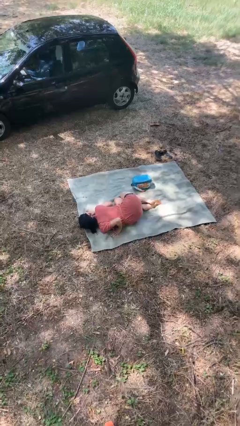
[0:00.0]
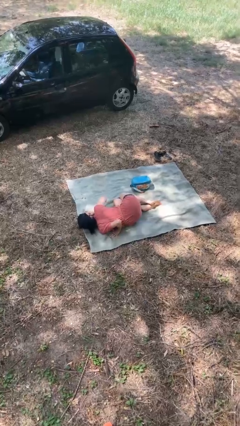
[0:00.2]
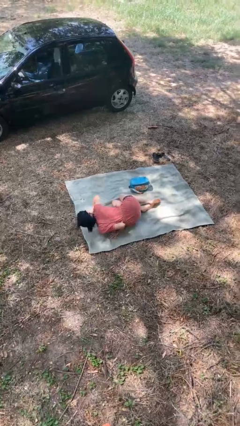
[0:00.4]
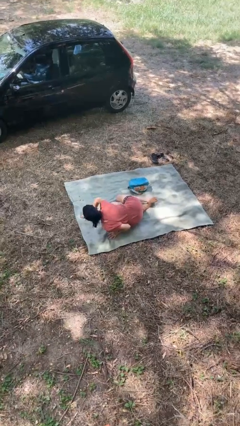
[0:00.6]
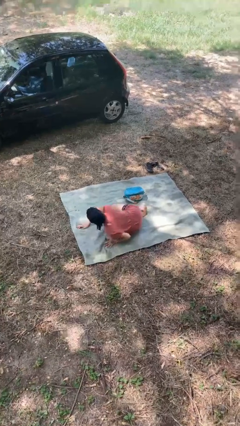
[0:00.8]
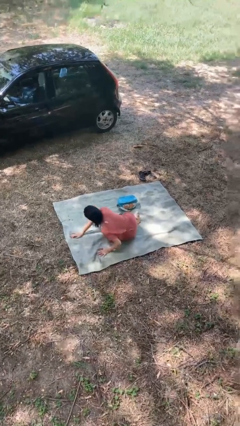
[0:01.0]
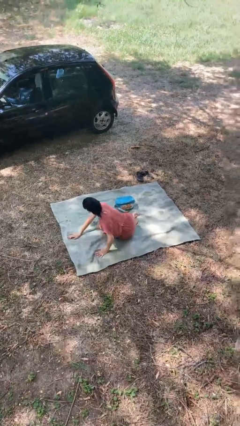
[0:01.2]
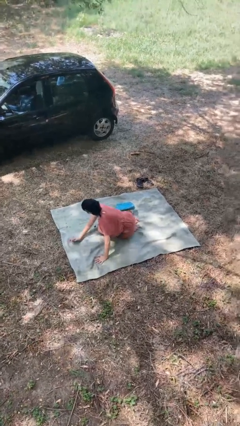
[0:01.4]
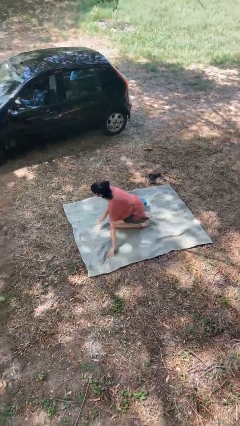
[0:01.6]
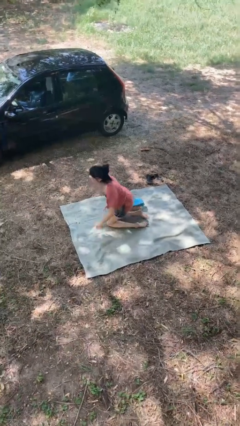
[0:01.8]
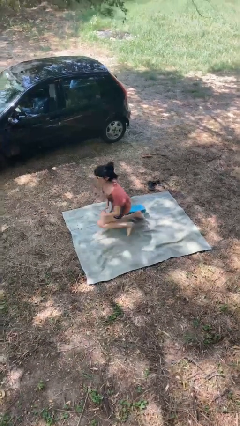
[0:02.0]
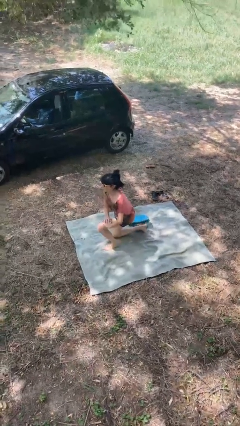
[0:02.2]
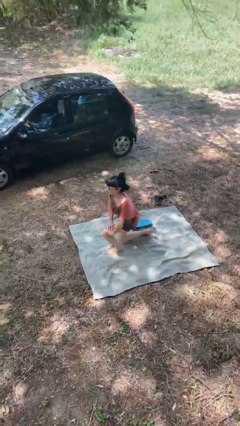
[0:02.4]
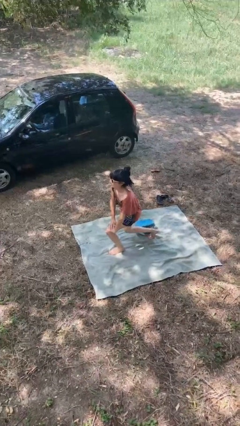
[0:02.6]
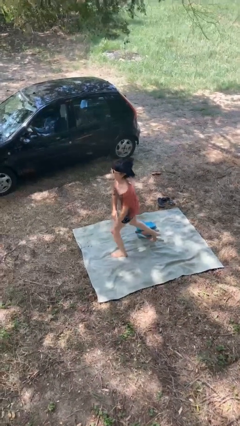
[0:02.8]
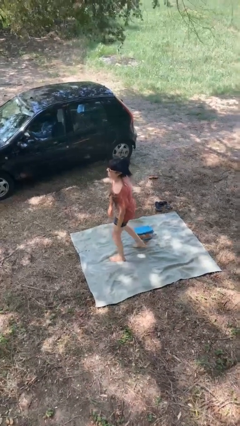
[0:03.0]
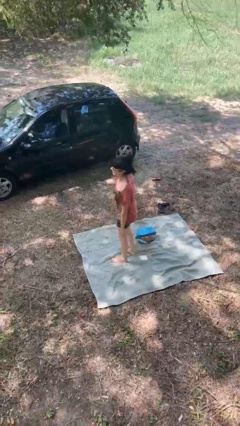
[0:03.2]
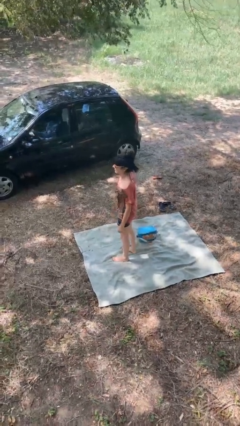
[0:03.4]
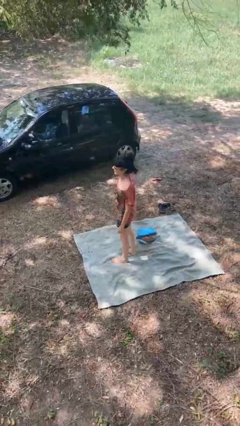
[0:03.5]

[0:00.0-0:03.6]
person stands up from floor

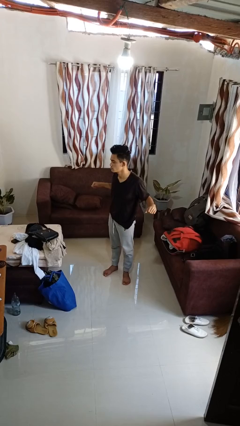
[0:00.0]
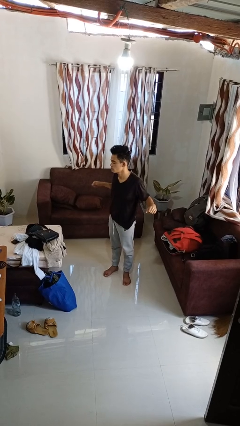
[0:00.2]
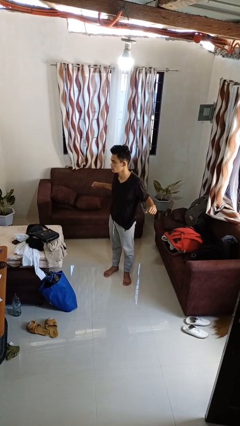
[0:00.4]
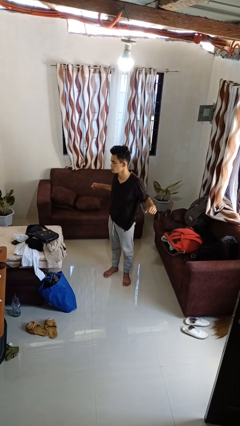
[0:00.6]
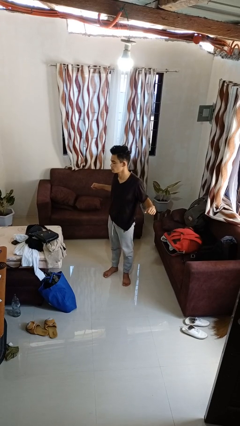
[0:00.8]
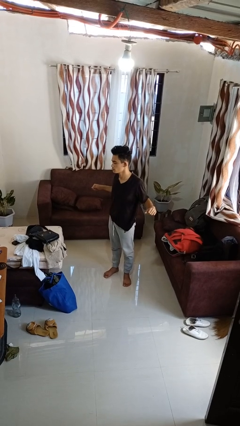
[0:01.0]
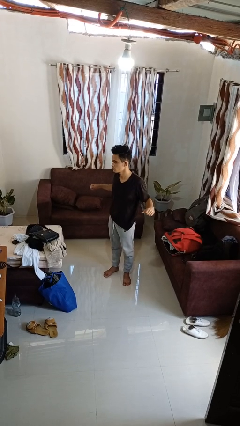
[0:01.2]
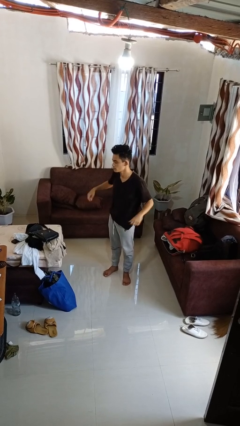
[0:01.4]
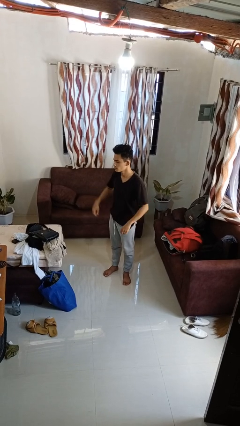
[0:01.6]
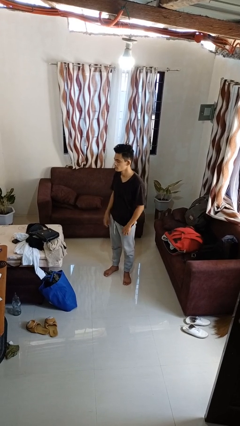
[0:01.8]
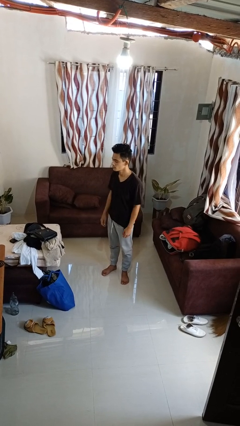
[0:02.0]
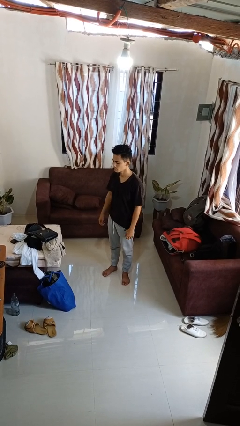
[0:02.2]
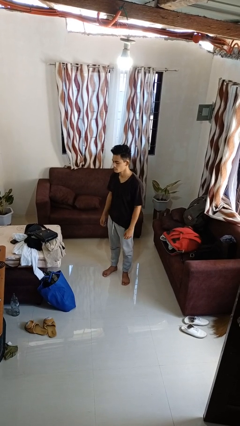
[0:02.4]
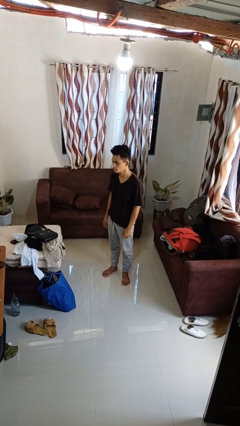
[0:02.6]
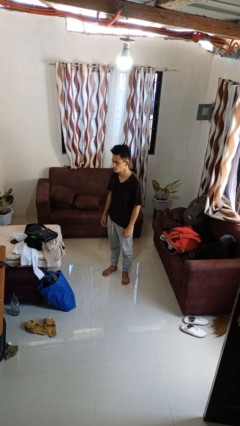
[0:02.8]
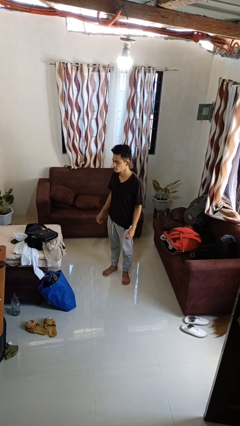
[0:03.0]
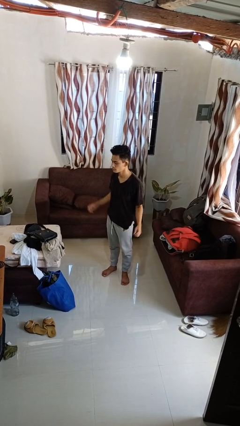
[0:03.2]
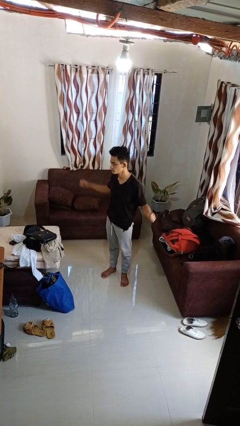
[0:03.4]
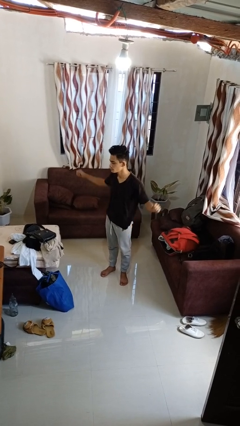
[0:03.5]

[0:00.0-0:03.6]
person stretches back

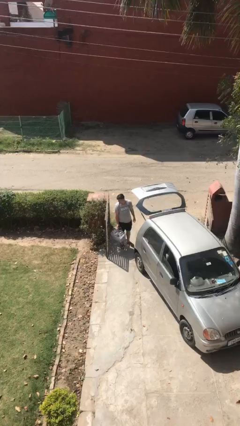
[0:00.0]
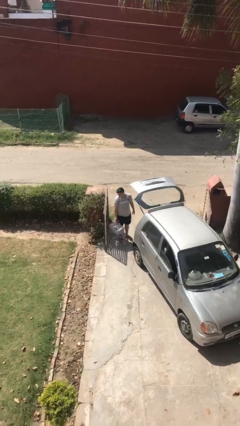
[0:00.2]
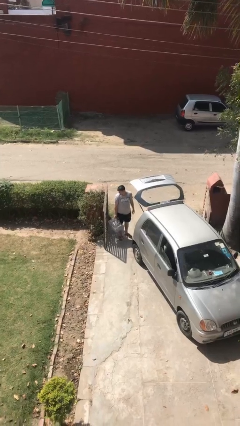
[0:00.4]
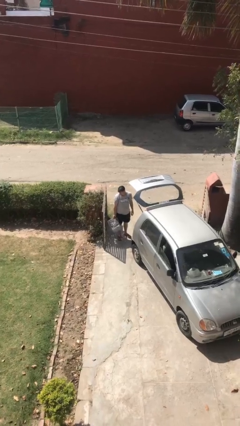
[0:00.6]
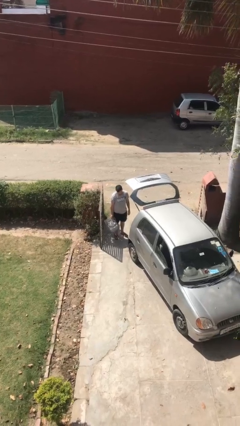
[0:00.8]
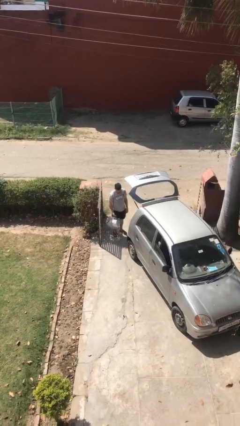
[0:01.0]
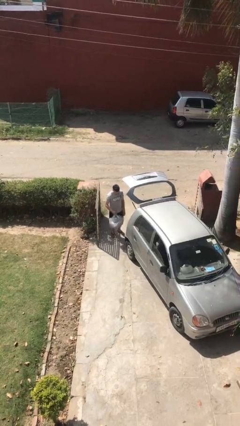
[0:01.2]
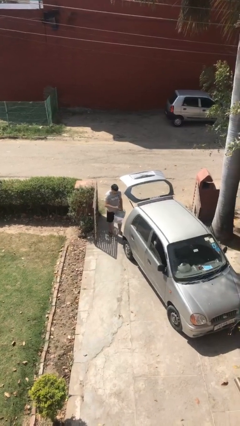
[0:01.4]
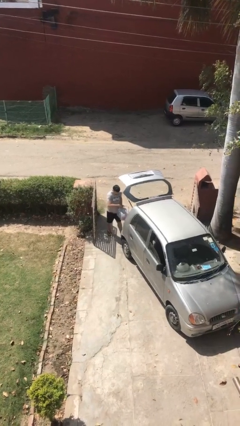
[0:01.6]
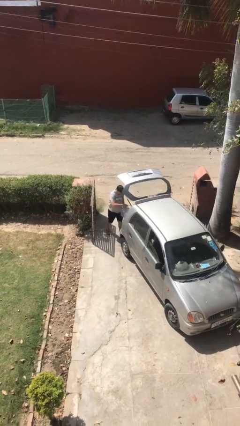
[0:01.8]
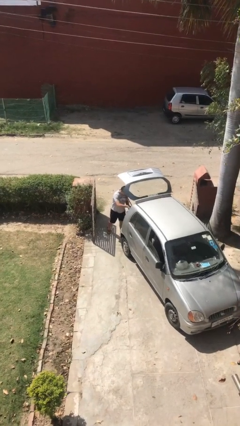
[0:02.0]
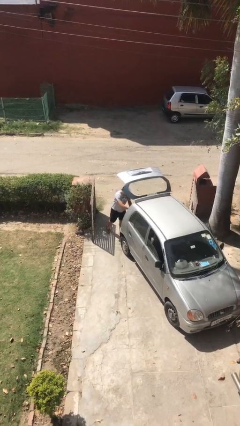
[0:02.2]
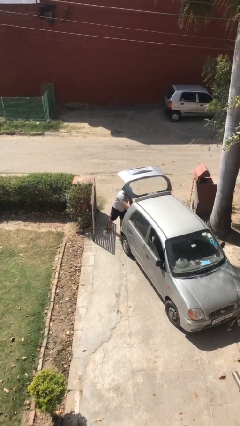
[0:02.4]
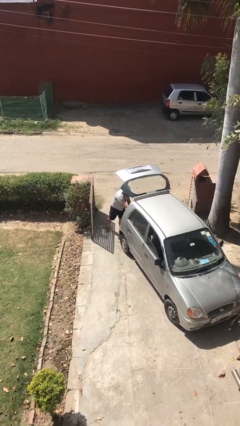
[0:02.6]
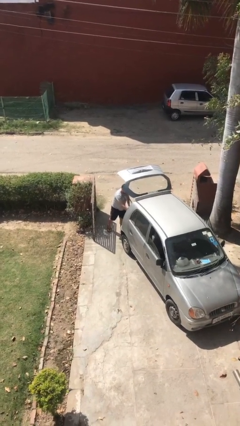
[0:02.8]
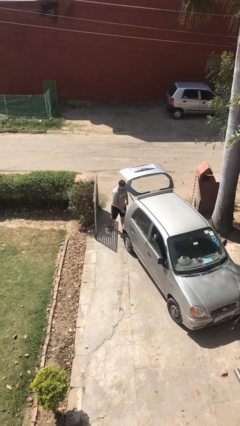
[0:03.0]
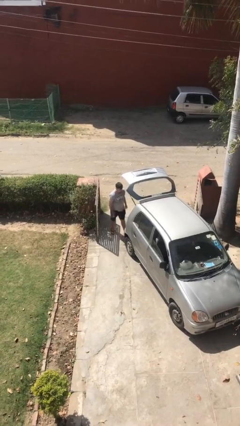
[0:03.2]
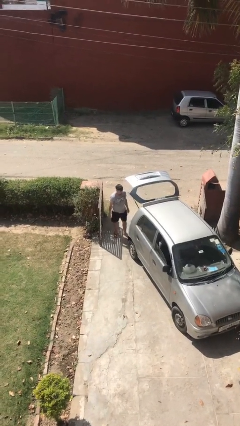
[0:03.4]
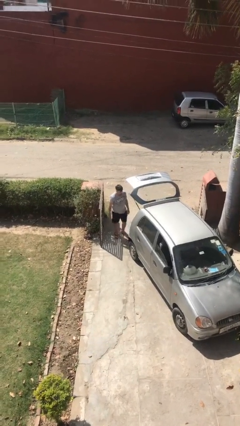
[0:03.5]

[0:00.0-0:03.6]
person loads car

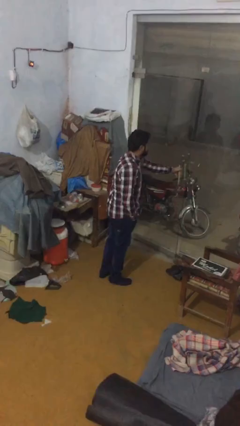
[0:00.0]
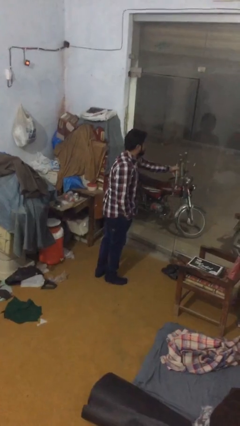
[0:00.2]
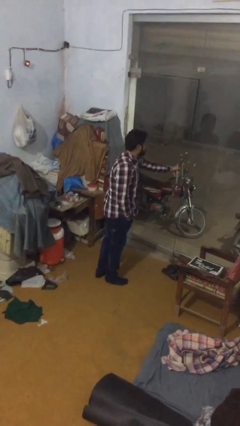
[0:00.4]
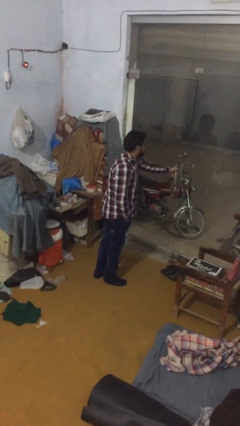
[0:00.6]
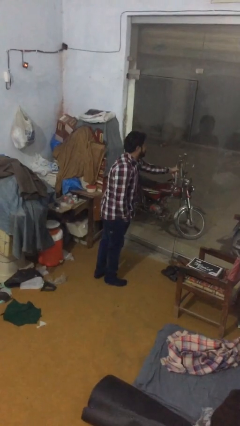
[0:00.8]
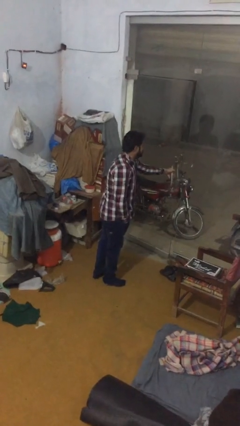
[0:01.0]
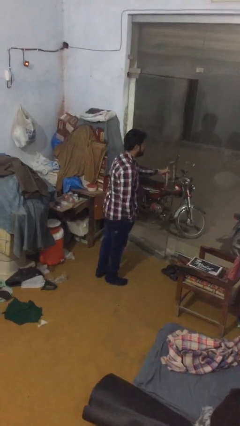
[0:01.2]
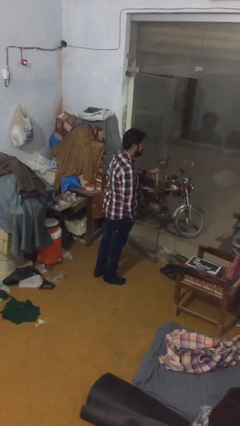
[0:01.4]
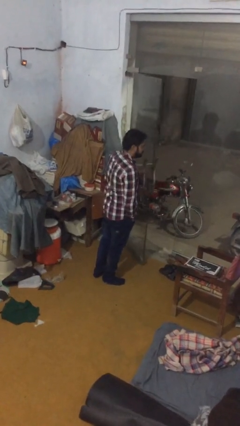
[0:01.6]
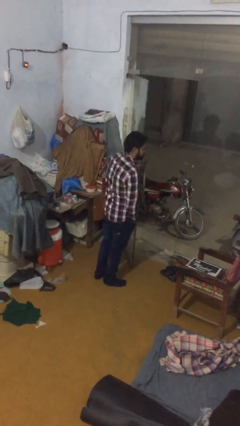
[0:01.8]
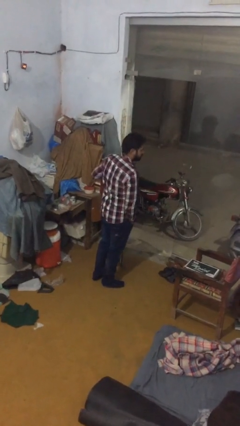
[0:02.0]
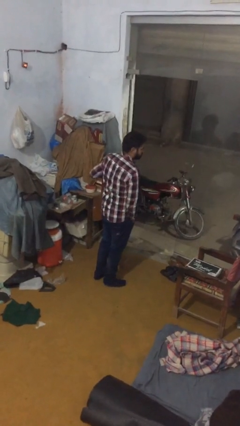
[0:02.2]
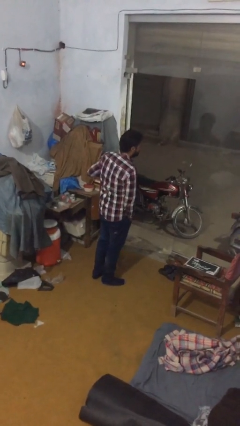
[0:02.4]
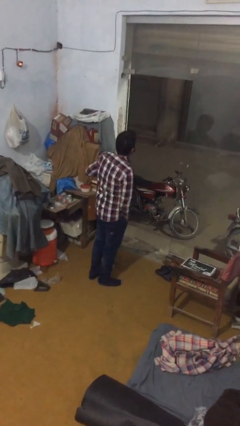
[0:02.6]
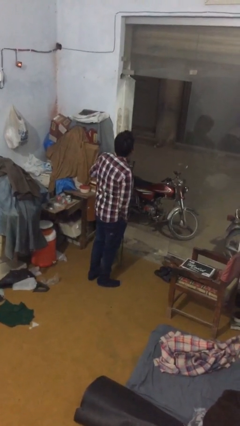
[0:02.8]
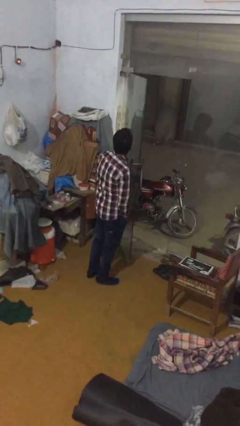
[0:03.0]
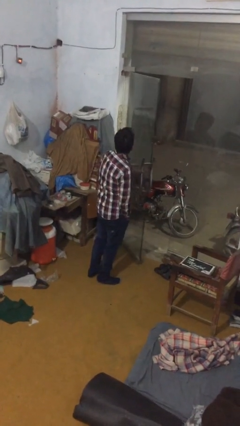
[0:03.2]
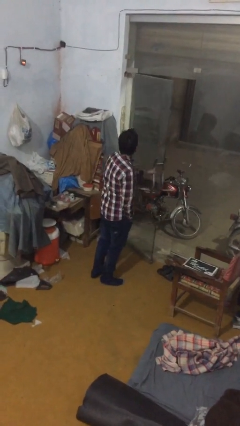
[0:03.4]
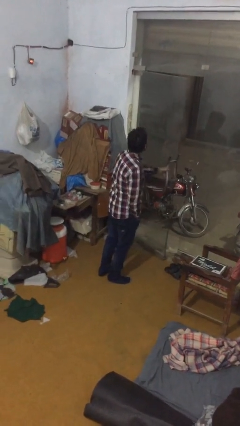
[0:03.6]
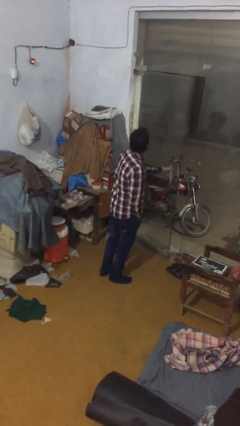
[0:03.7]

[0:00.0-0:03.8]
person opens facility door

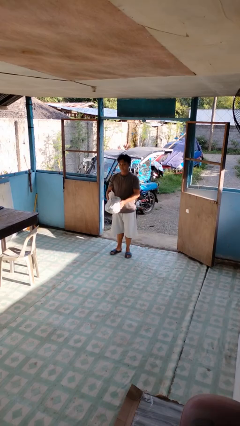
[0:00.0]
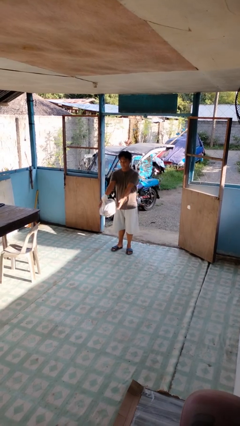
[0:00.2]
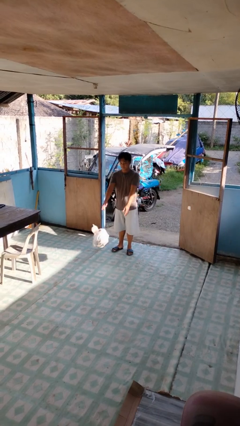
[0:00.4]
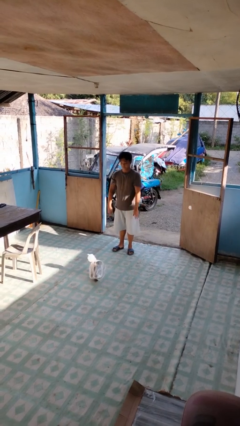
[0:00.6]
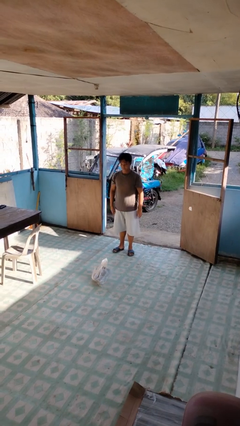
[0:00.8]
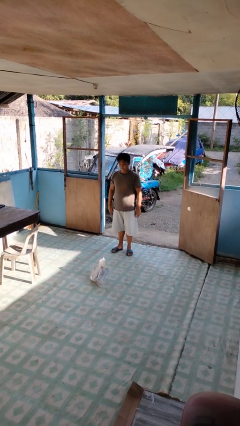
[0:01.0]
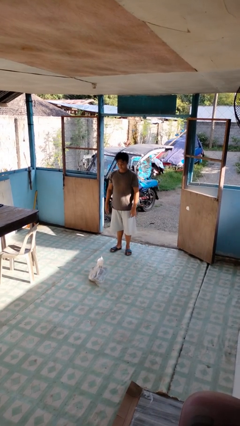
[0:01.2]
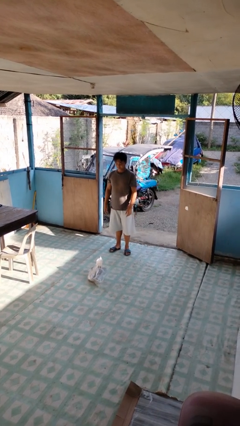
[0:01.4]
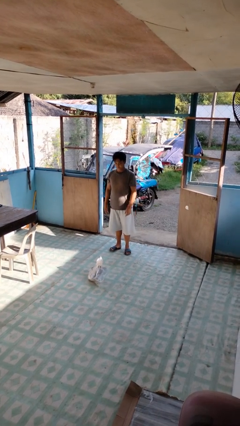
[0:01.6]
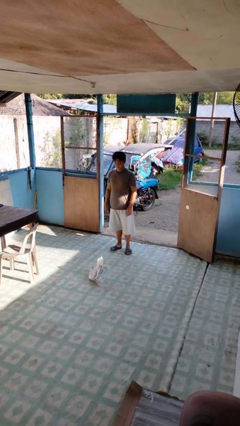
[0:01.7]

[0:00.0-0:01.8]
person throws object to ground

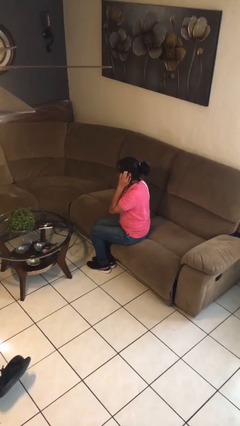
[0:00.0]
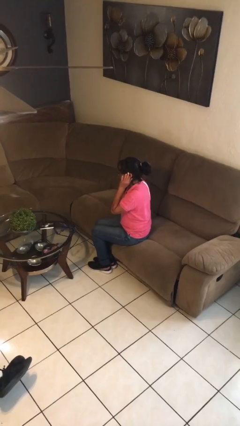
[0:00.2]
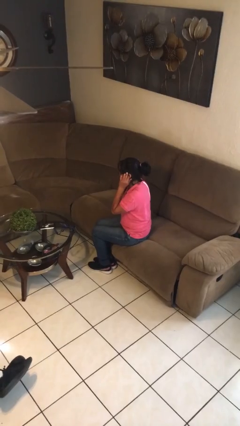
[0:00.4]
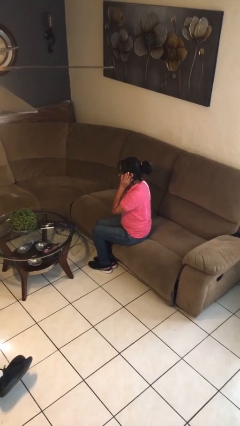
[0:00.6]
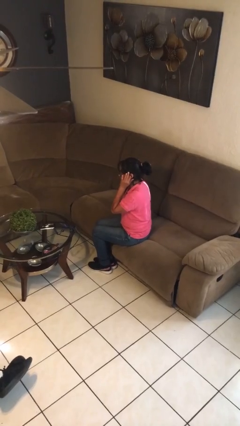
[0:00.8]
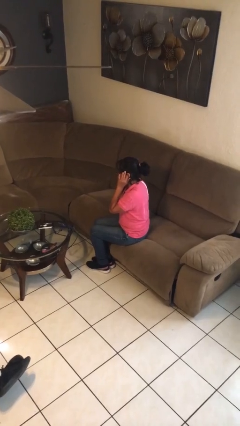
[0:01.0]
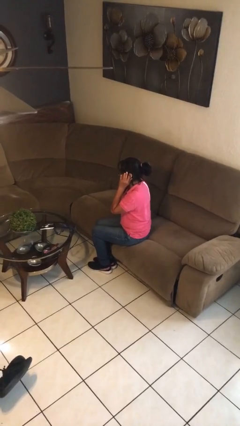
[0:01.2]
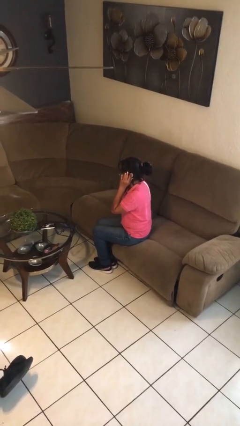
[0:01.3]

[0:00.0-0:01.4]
person puts fingers in ear
